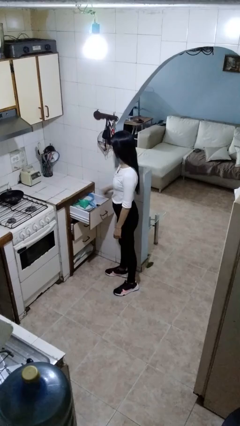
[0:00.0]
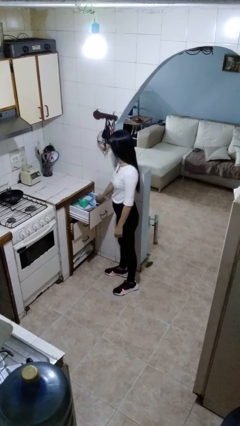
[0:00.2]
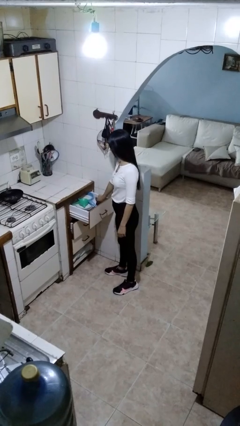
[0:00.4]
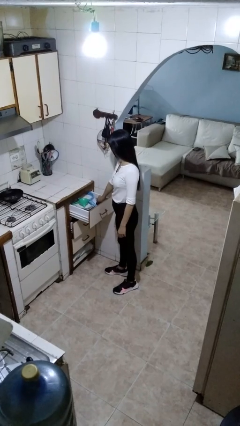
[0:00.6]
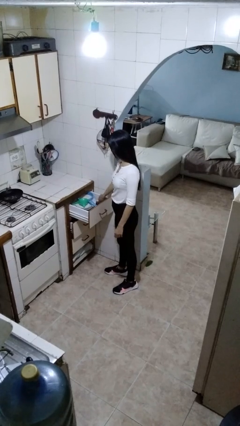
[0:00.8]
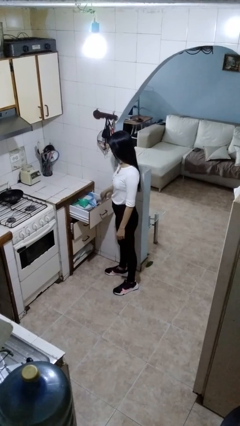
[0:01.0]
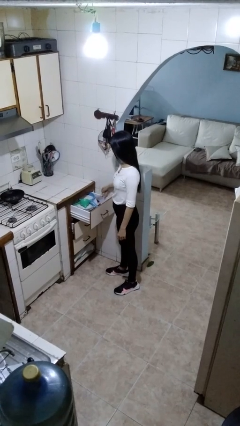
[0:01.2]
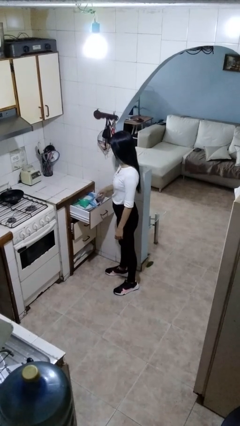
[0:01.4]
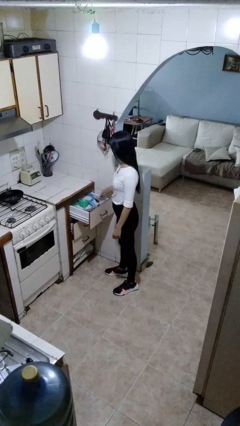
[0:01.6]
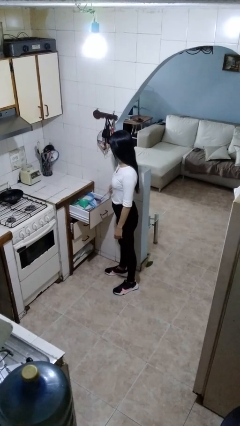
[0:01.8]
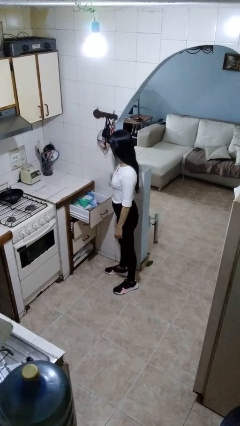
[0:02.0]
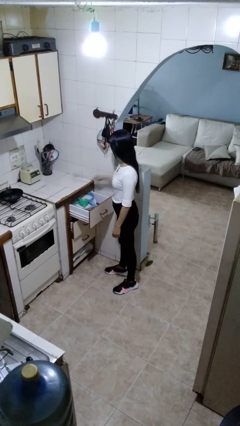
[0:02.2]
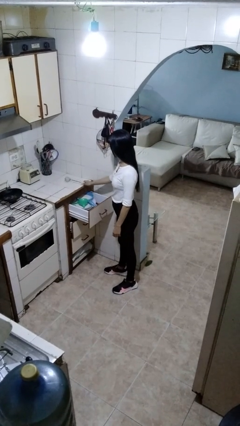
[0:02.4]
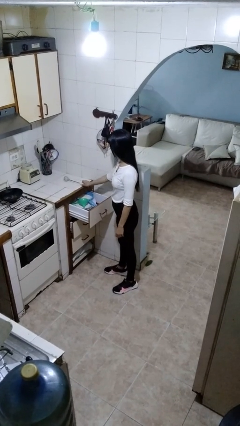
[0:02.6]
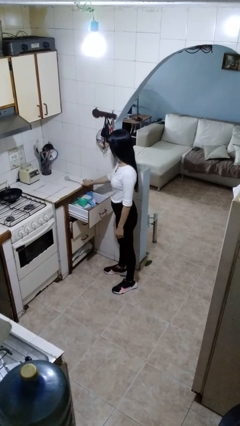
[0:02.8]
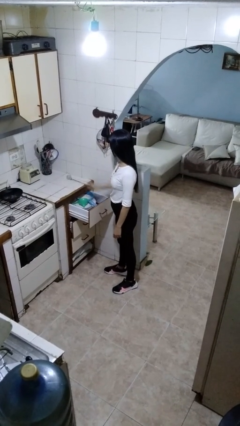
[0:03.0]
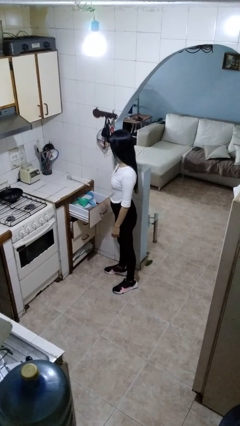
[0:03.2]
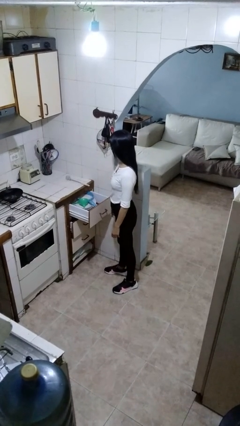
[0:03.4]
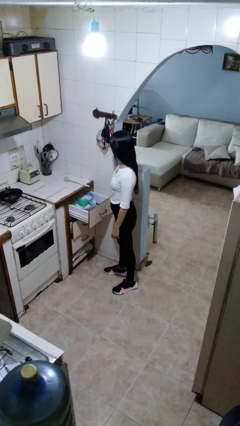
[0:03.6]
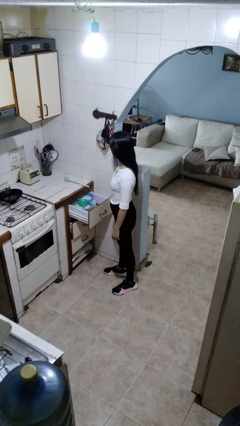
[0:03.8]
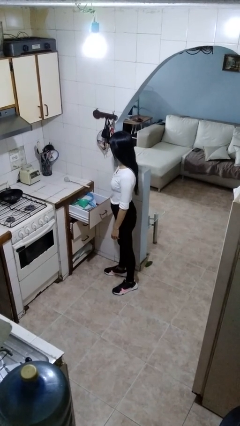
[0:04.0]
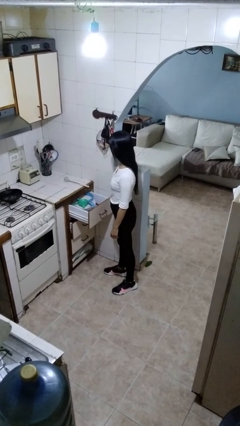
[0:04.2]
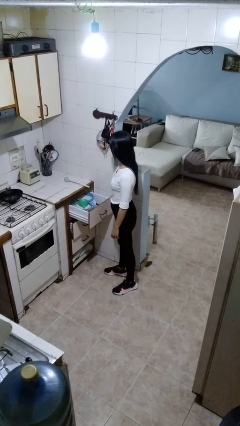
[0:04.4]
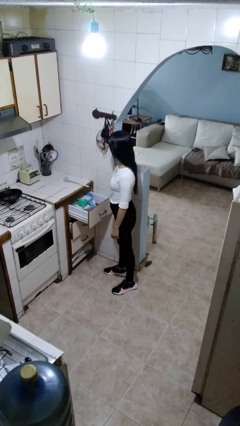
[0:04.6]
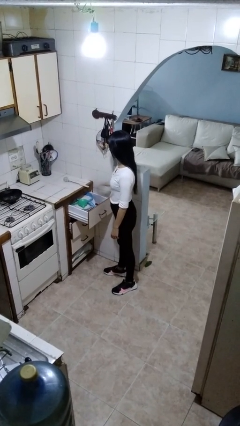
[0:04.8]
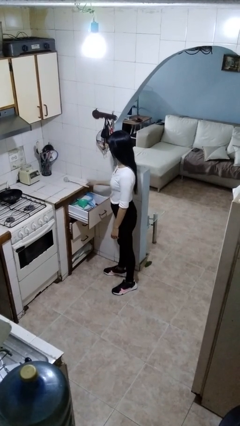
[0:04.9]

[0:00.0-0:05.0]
person takes object from kitchen drawer

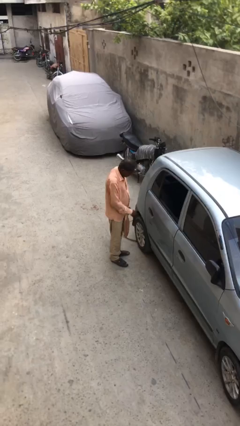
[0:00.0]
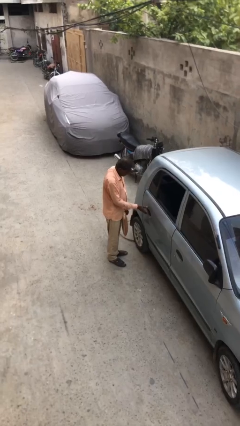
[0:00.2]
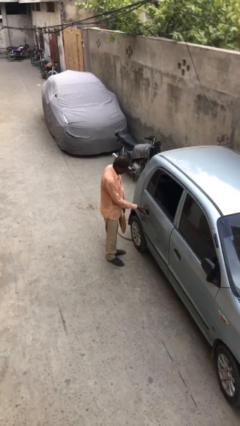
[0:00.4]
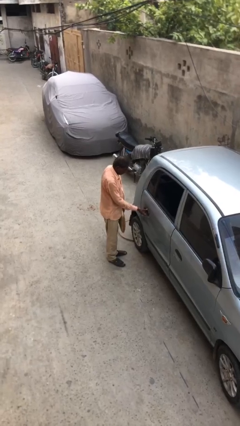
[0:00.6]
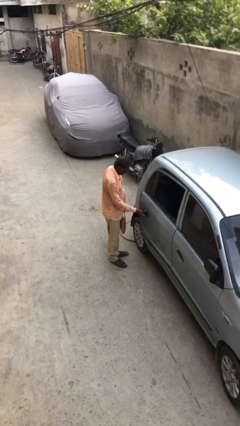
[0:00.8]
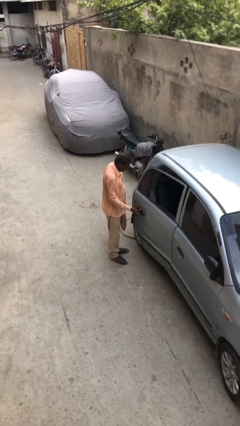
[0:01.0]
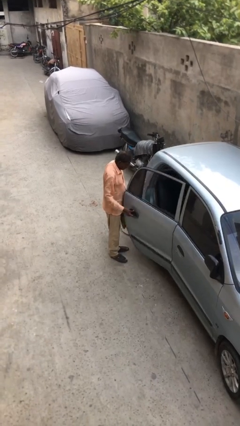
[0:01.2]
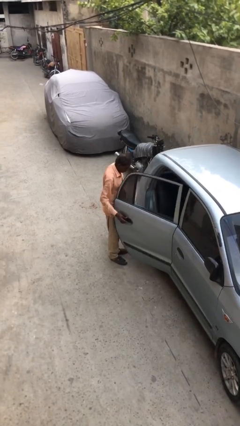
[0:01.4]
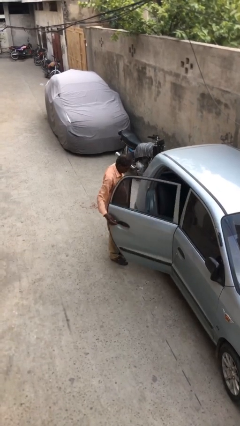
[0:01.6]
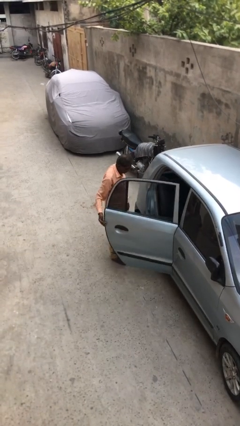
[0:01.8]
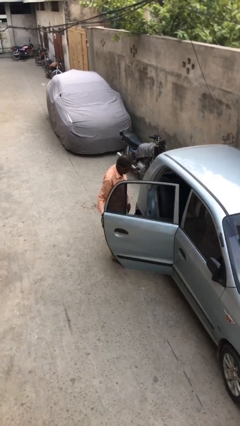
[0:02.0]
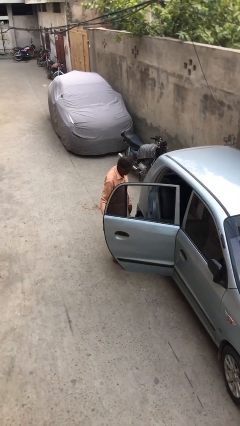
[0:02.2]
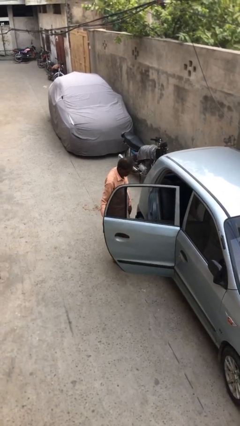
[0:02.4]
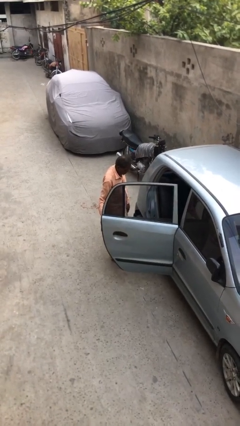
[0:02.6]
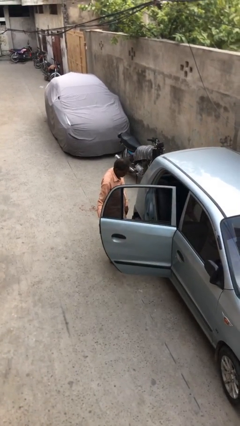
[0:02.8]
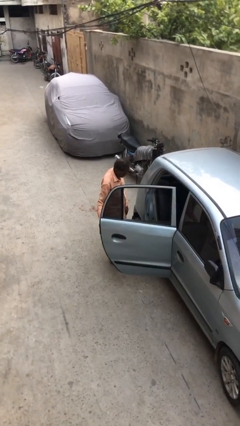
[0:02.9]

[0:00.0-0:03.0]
person opens car door

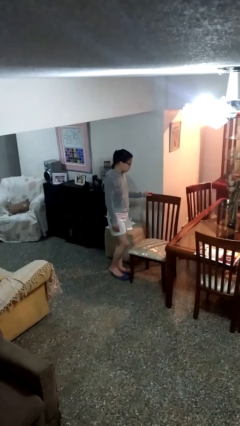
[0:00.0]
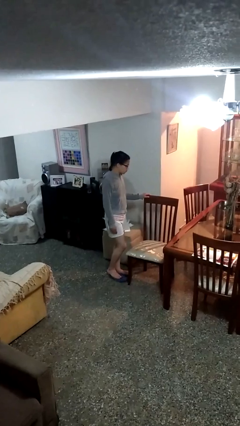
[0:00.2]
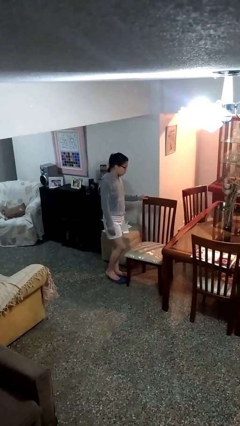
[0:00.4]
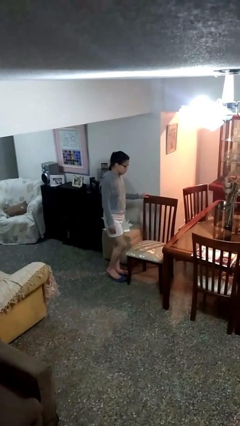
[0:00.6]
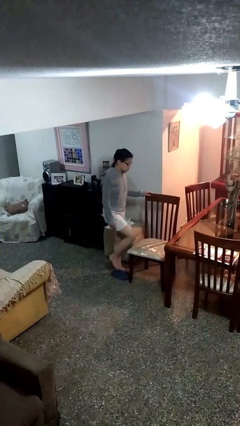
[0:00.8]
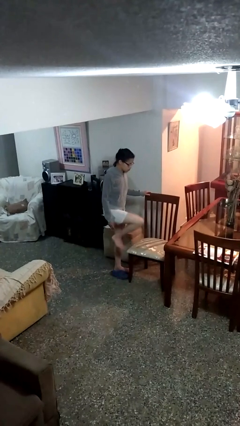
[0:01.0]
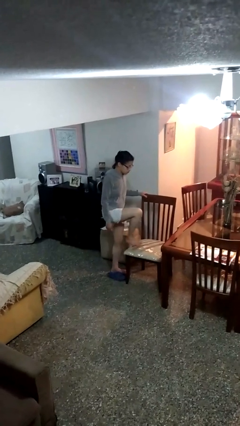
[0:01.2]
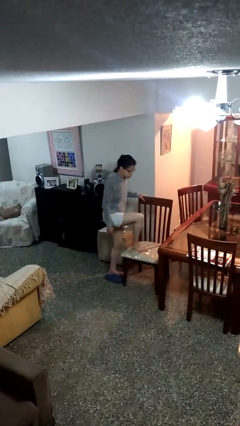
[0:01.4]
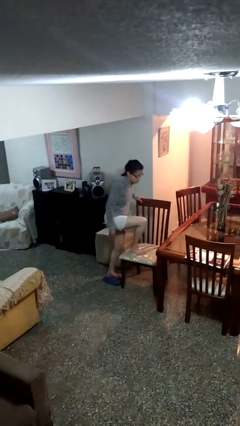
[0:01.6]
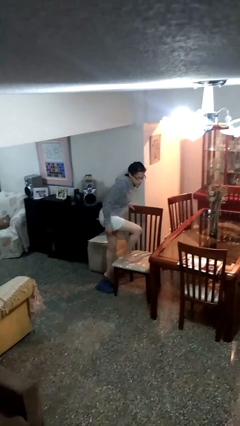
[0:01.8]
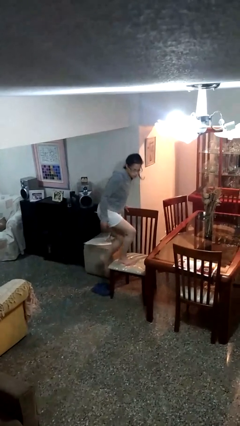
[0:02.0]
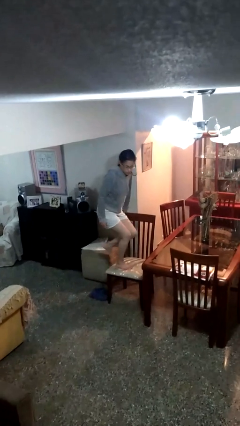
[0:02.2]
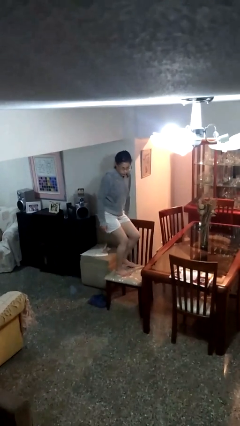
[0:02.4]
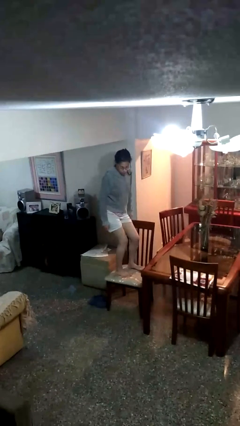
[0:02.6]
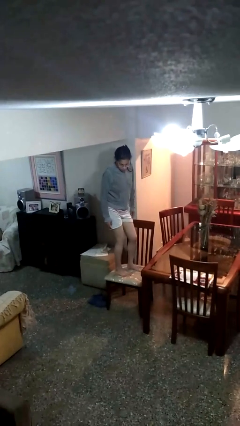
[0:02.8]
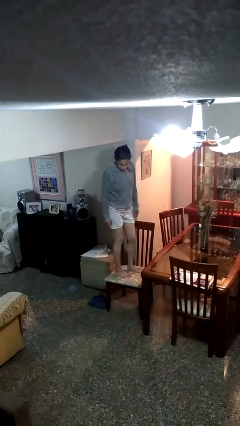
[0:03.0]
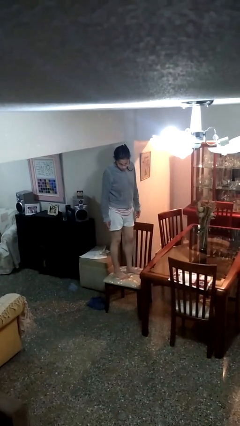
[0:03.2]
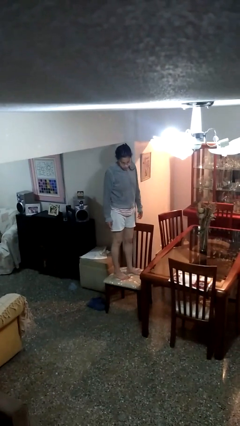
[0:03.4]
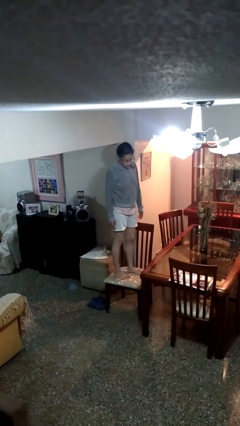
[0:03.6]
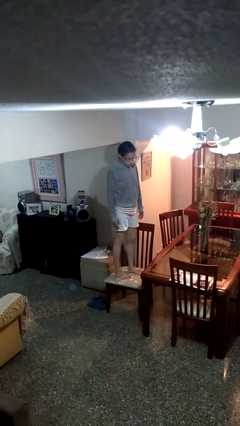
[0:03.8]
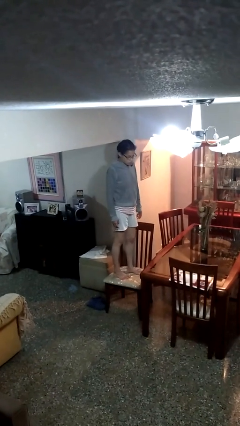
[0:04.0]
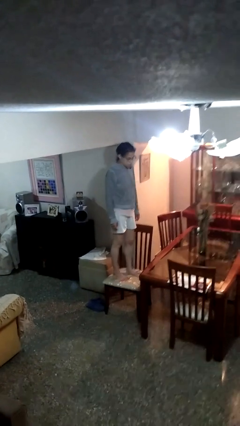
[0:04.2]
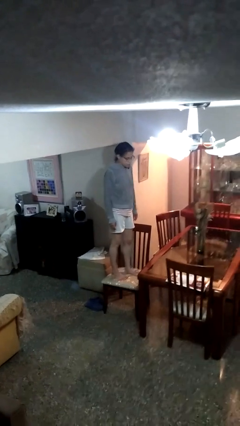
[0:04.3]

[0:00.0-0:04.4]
person climbs on chair

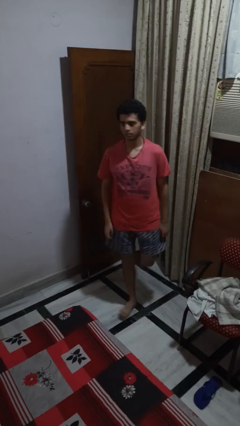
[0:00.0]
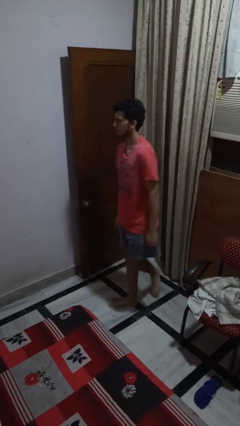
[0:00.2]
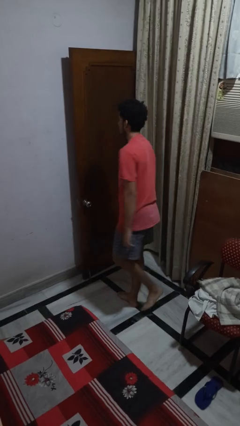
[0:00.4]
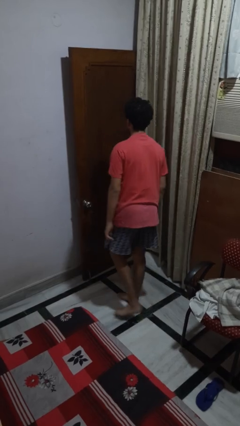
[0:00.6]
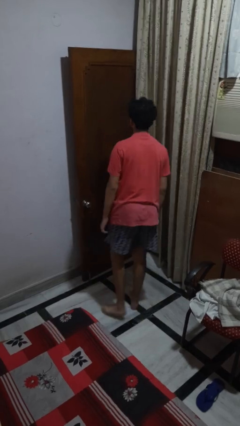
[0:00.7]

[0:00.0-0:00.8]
person twirls

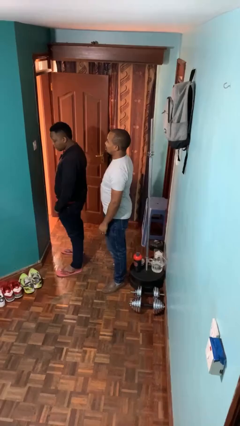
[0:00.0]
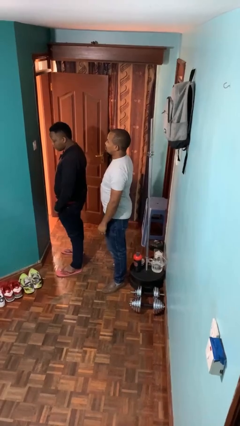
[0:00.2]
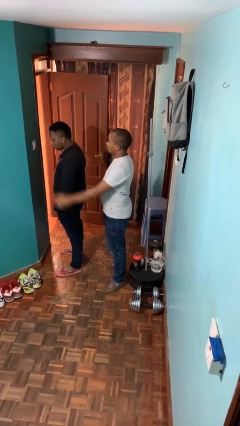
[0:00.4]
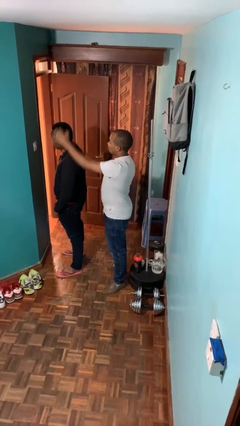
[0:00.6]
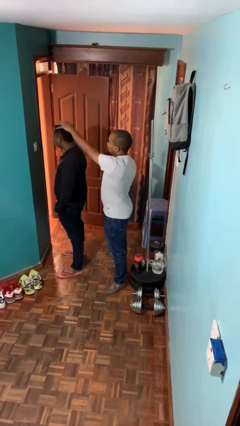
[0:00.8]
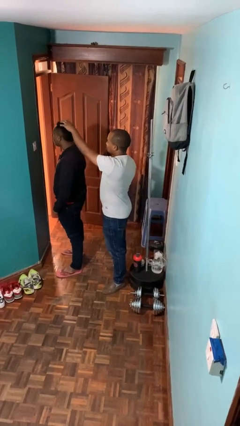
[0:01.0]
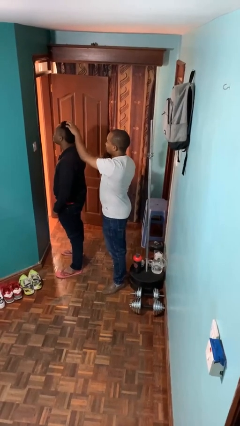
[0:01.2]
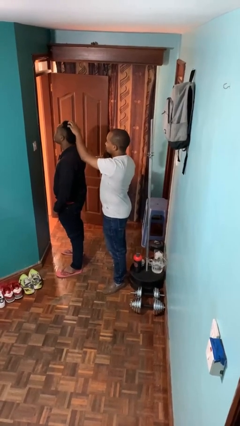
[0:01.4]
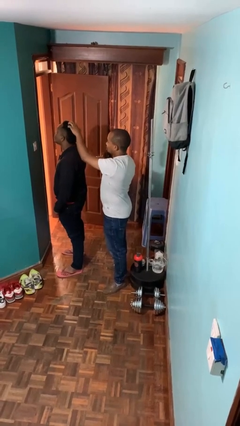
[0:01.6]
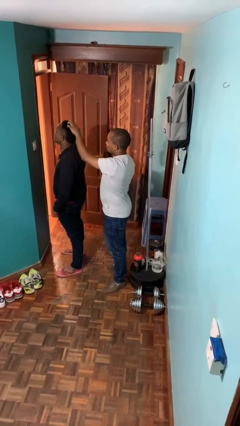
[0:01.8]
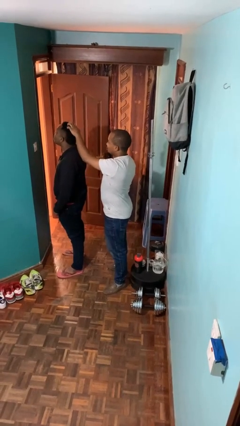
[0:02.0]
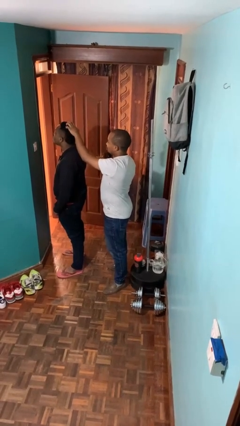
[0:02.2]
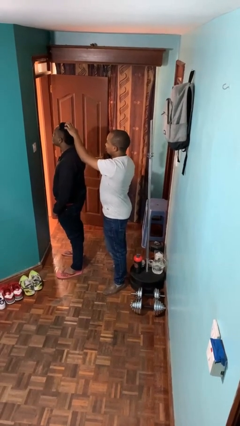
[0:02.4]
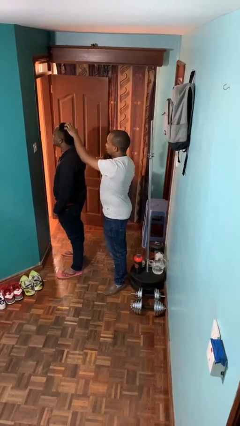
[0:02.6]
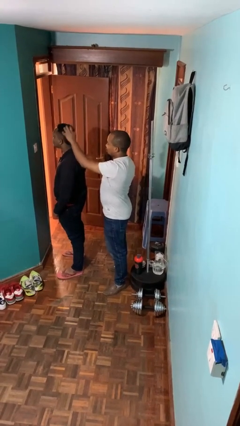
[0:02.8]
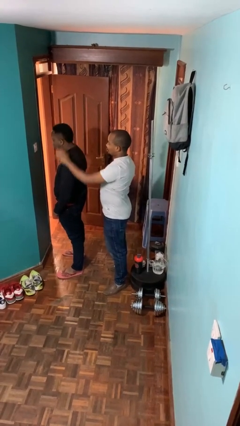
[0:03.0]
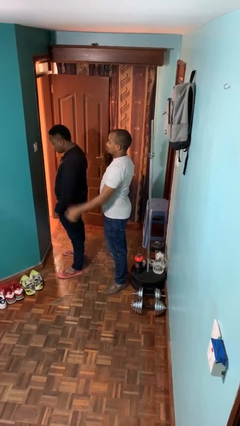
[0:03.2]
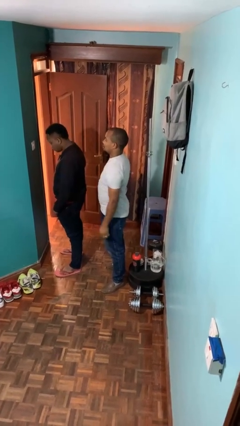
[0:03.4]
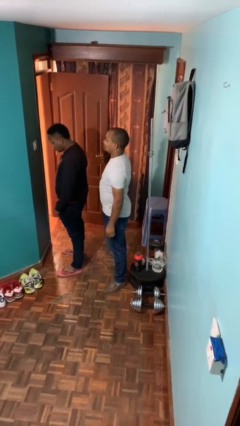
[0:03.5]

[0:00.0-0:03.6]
person grabs person by hair

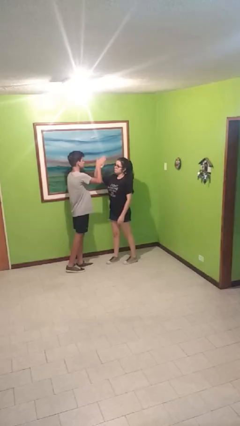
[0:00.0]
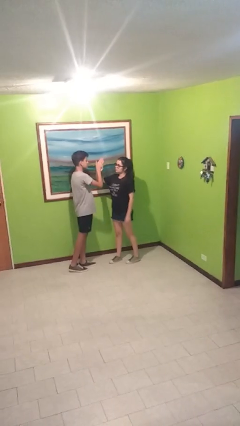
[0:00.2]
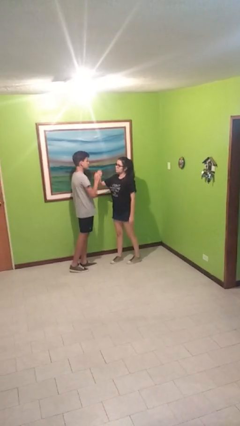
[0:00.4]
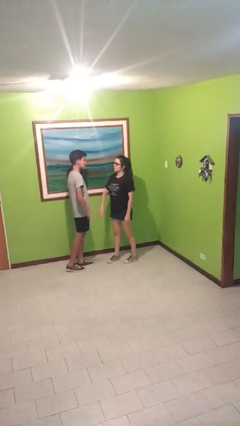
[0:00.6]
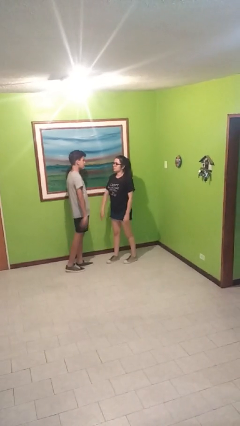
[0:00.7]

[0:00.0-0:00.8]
person highfives hand
